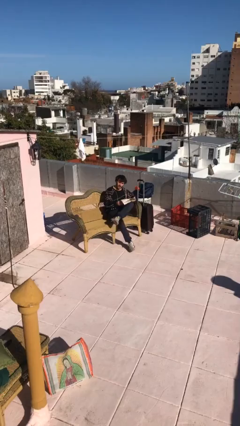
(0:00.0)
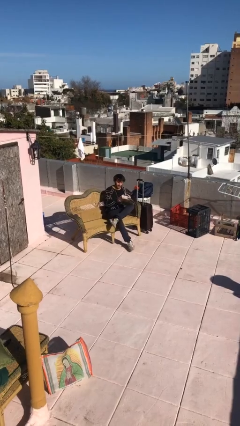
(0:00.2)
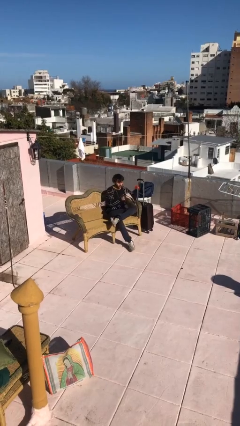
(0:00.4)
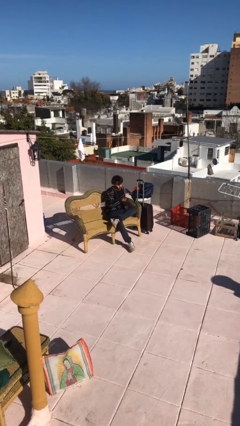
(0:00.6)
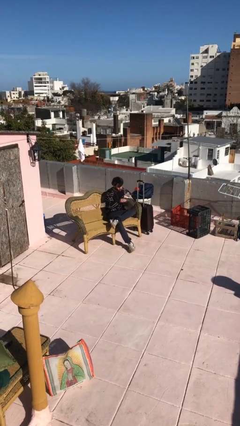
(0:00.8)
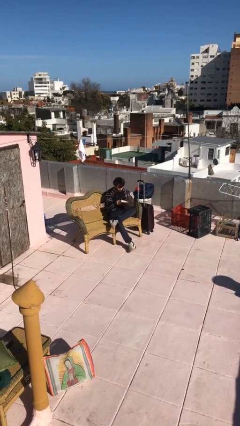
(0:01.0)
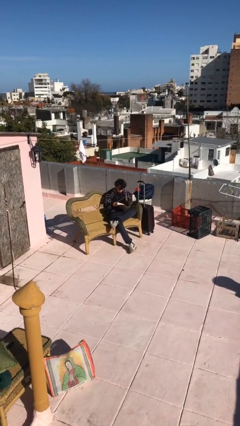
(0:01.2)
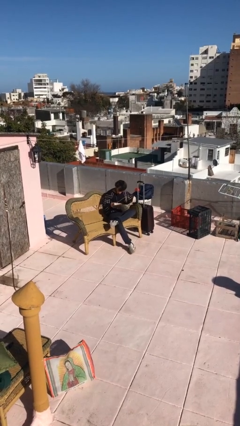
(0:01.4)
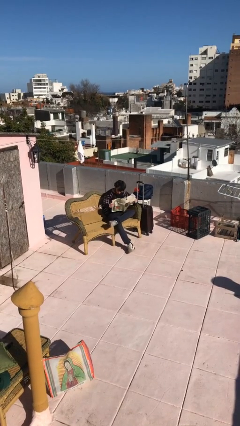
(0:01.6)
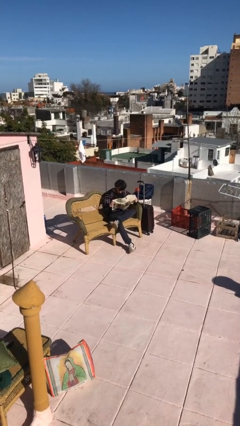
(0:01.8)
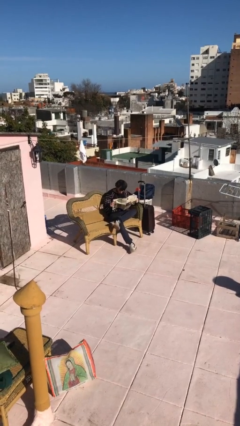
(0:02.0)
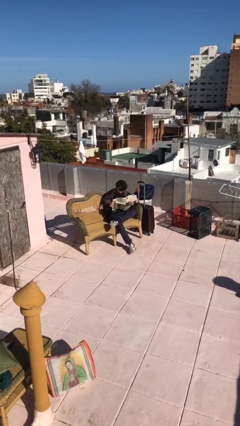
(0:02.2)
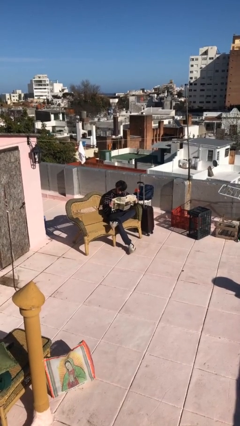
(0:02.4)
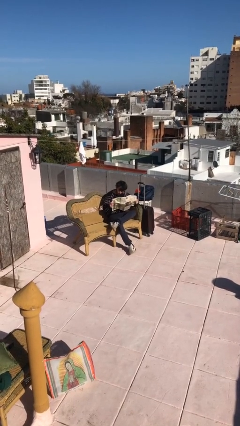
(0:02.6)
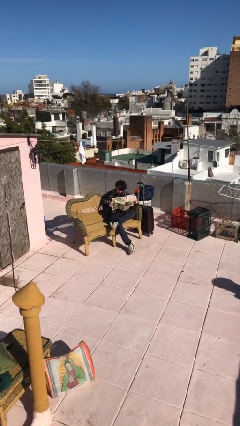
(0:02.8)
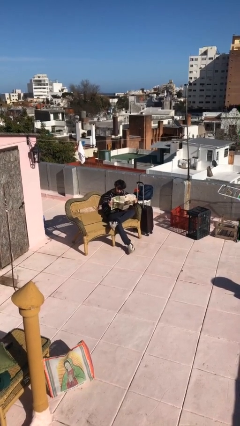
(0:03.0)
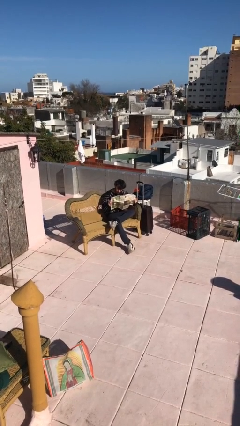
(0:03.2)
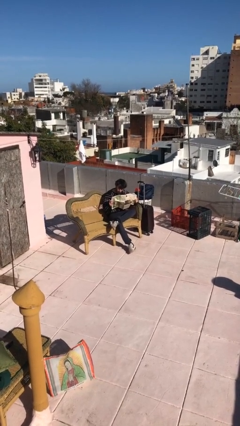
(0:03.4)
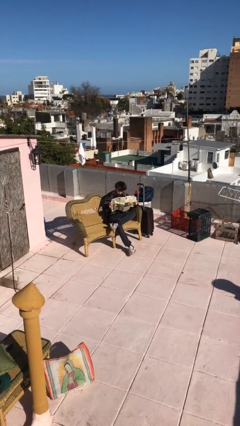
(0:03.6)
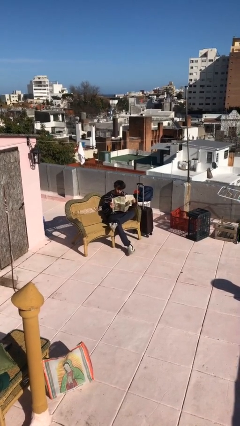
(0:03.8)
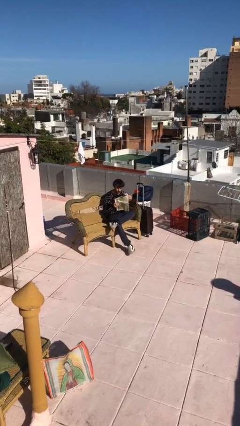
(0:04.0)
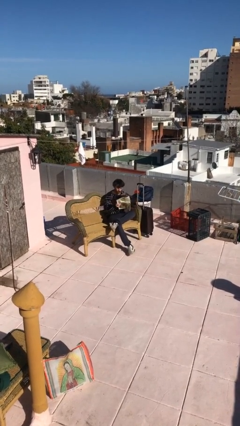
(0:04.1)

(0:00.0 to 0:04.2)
person reads newspaper

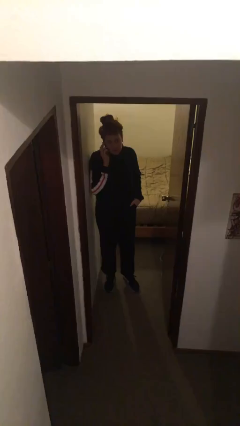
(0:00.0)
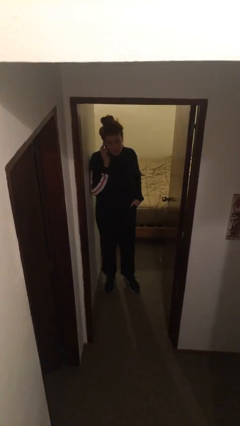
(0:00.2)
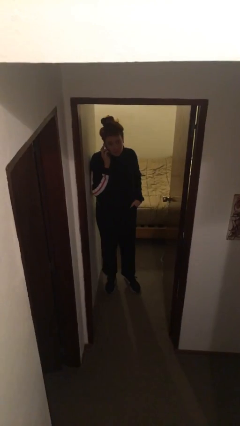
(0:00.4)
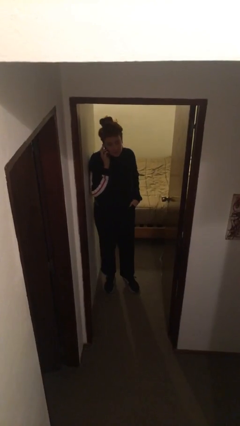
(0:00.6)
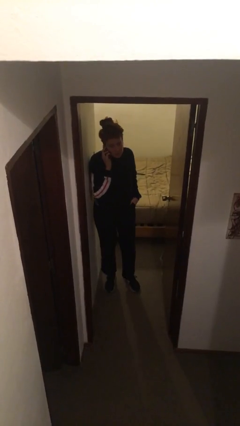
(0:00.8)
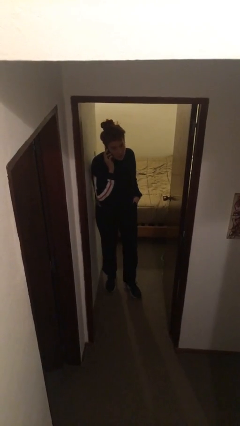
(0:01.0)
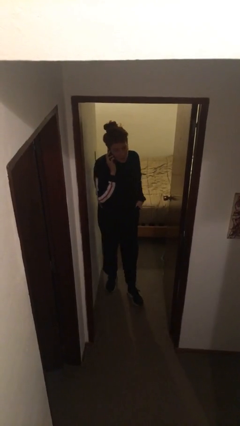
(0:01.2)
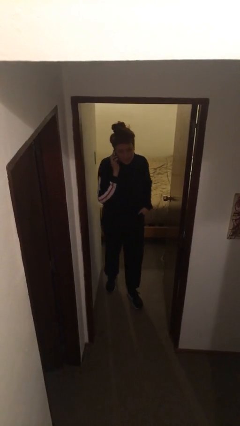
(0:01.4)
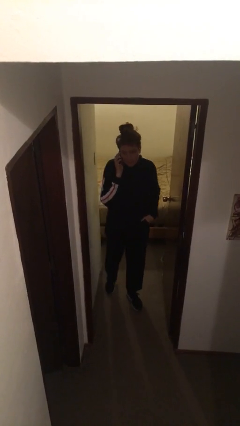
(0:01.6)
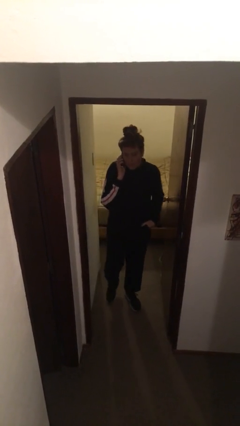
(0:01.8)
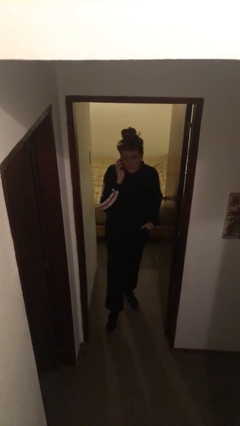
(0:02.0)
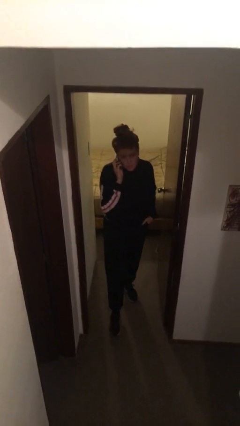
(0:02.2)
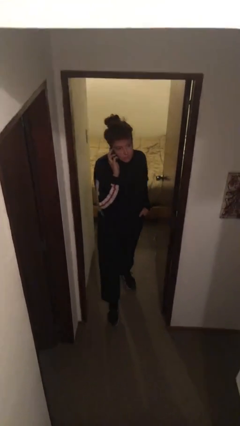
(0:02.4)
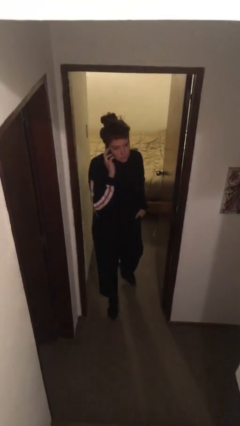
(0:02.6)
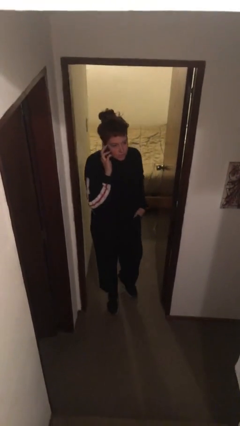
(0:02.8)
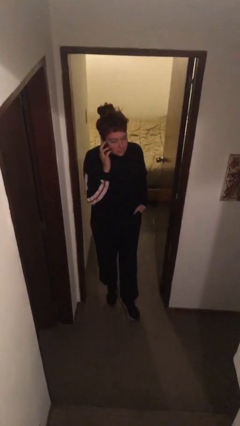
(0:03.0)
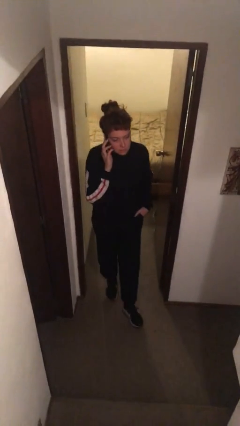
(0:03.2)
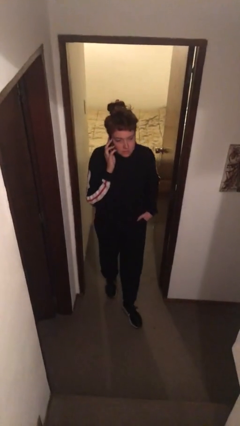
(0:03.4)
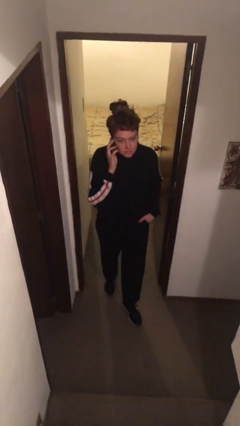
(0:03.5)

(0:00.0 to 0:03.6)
person enters scene through structure

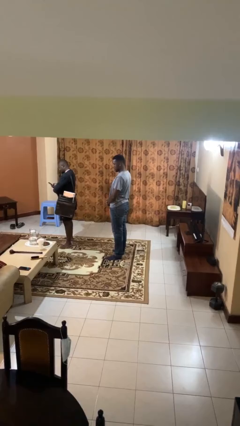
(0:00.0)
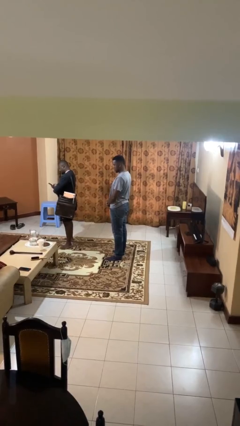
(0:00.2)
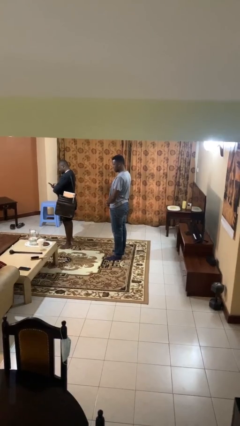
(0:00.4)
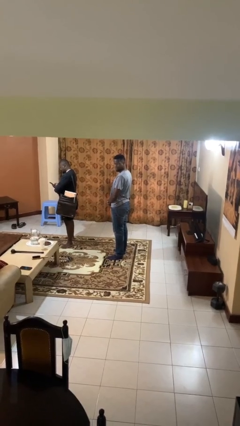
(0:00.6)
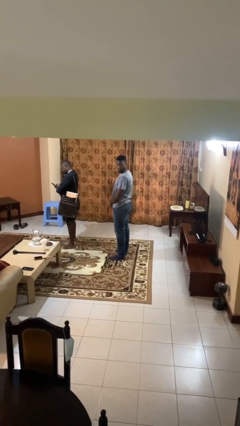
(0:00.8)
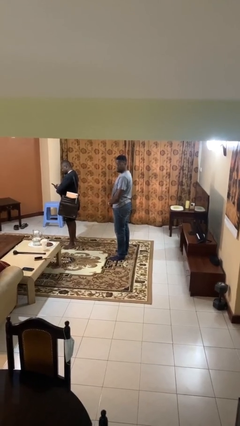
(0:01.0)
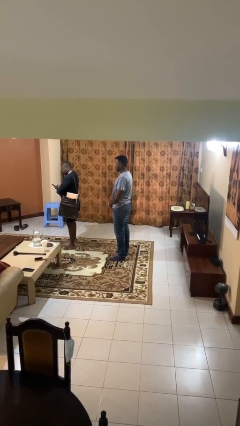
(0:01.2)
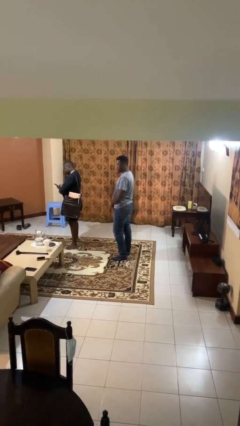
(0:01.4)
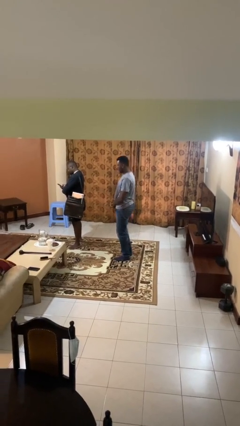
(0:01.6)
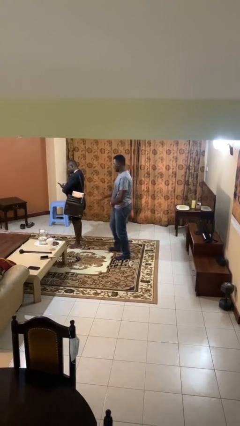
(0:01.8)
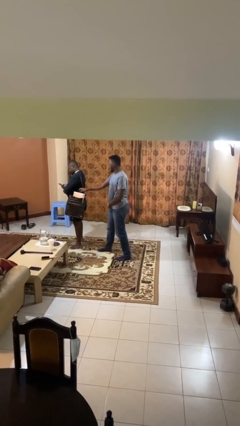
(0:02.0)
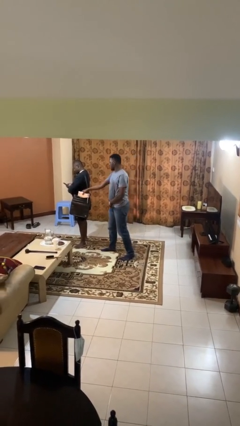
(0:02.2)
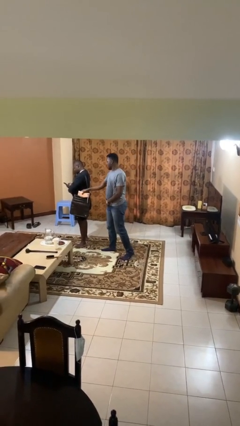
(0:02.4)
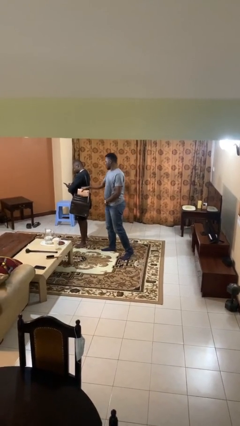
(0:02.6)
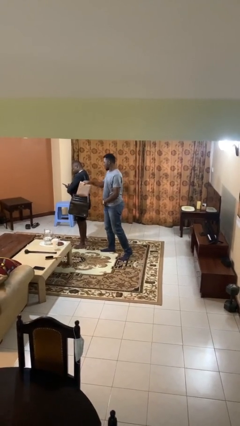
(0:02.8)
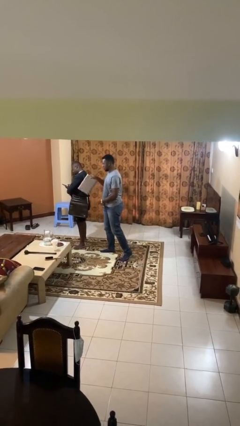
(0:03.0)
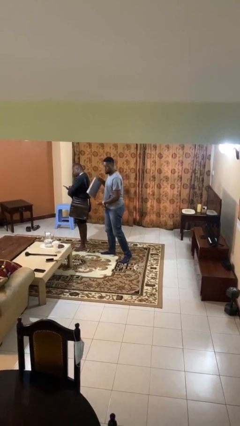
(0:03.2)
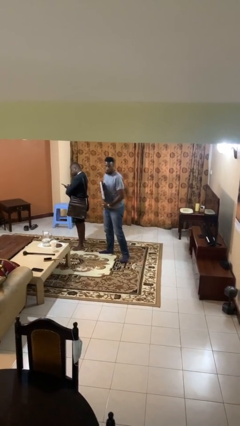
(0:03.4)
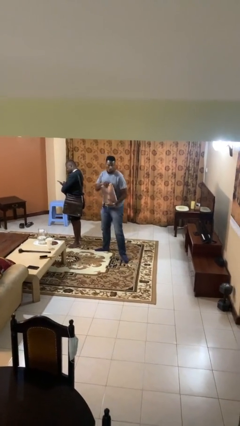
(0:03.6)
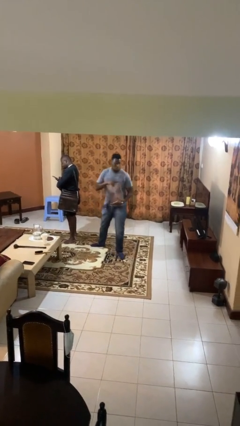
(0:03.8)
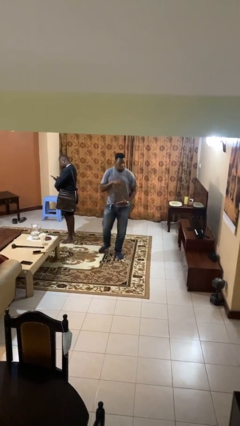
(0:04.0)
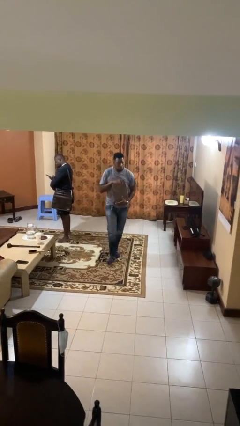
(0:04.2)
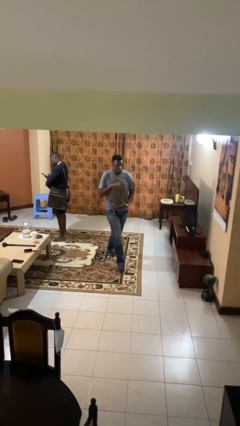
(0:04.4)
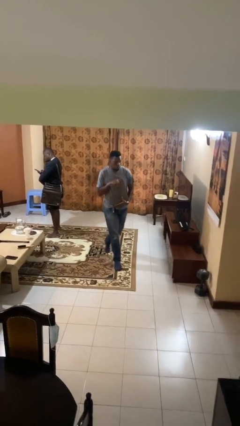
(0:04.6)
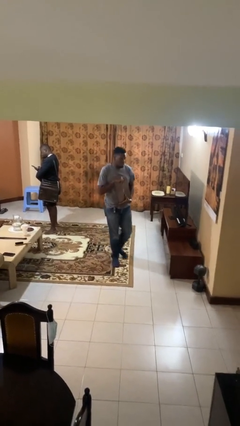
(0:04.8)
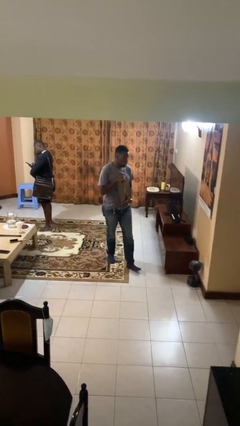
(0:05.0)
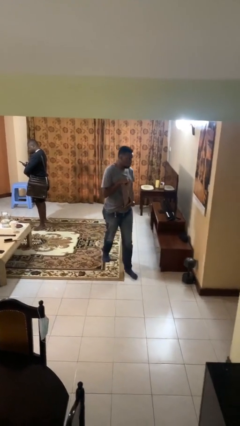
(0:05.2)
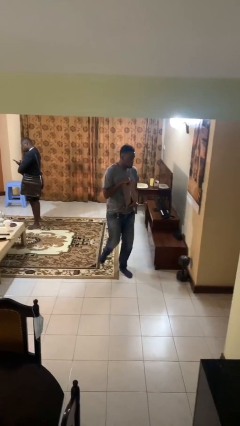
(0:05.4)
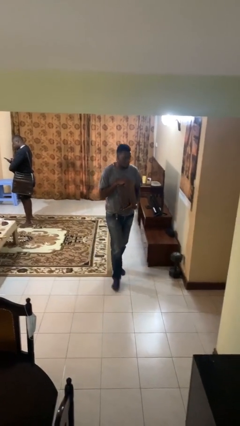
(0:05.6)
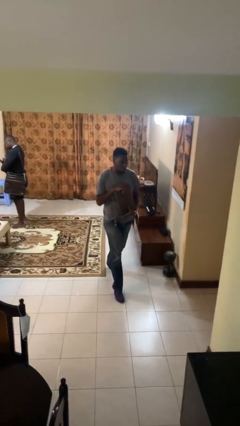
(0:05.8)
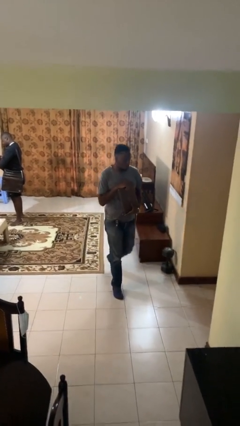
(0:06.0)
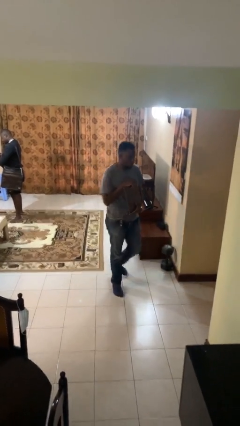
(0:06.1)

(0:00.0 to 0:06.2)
person steals object from person

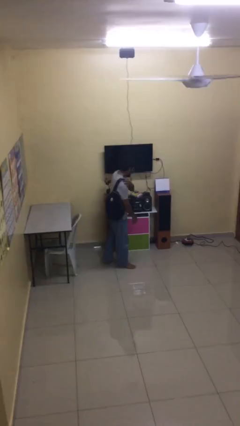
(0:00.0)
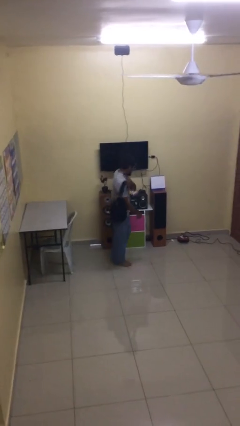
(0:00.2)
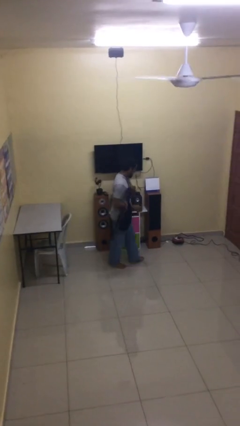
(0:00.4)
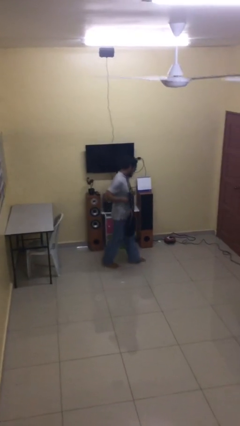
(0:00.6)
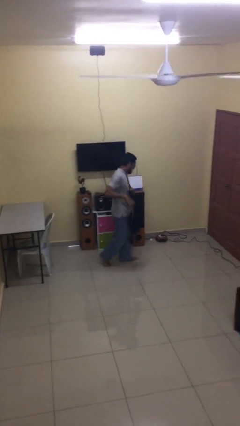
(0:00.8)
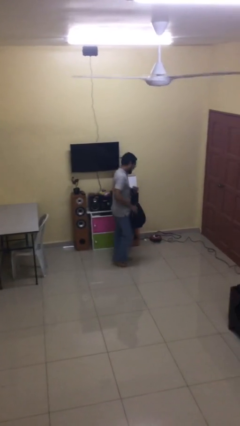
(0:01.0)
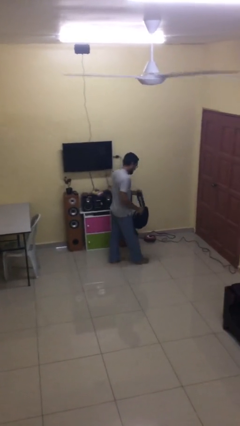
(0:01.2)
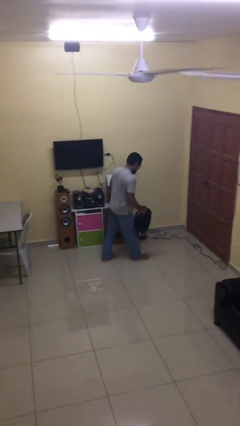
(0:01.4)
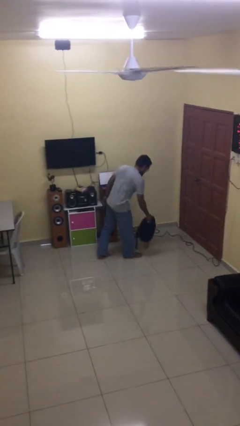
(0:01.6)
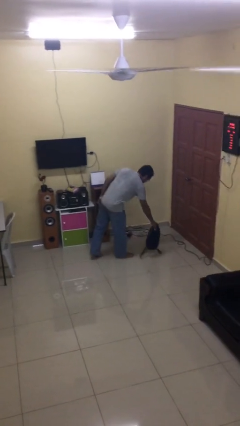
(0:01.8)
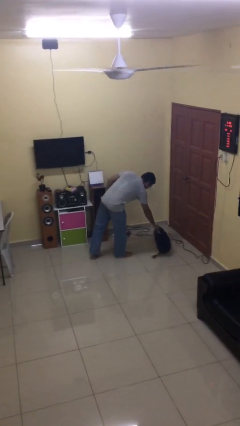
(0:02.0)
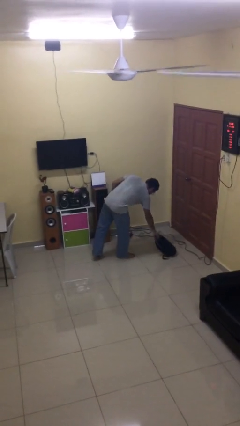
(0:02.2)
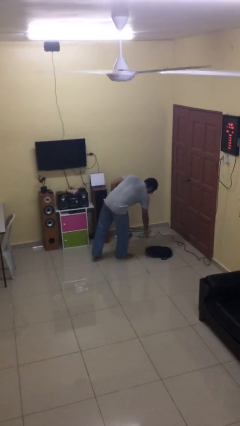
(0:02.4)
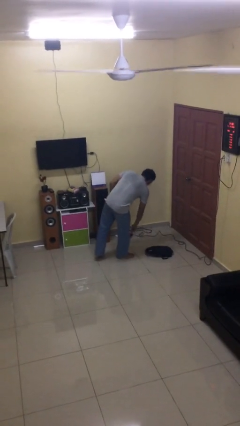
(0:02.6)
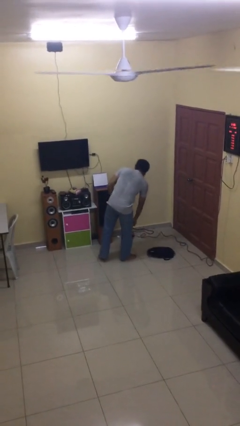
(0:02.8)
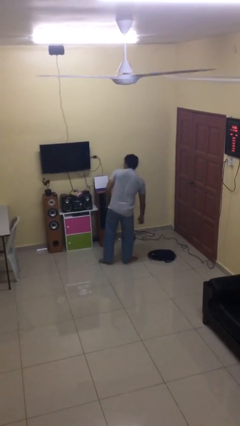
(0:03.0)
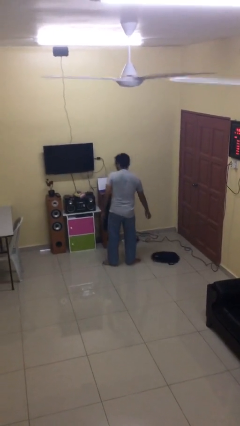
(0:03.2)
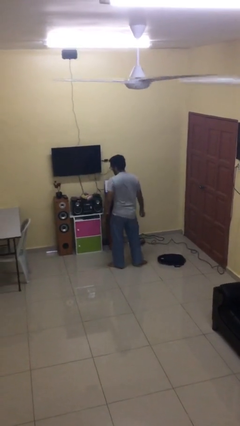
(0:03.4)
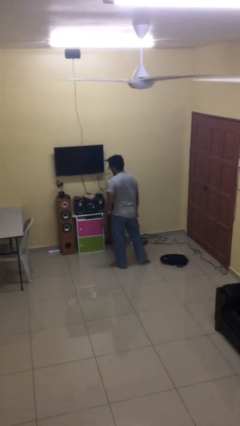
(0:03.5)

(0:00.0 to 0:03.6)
person puts down object on floor

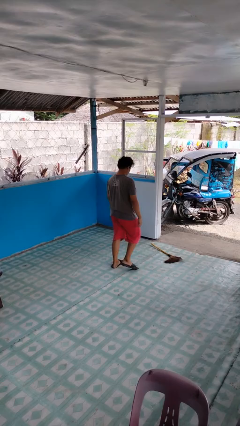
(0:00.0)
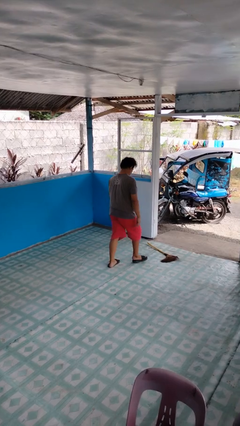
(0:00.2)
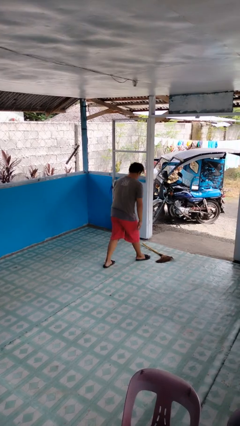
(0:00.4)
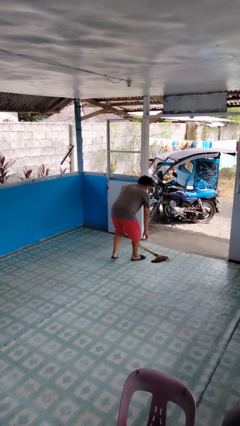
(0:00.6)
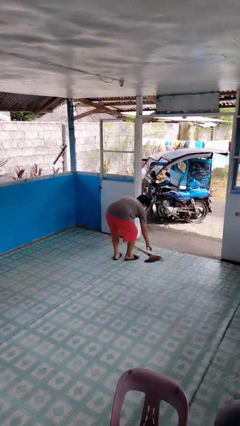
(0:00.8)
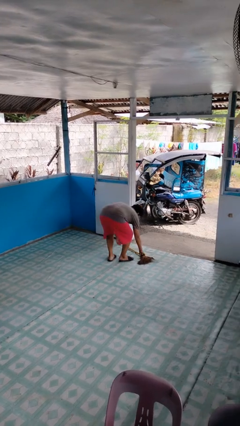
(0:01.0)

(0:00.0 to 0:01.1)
person picks up object from floor
